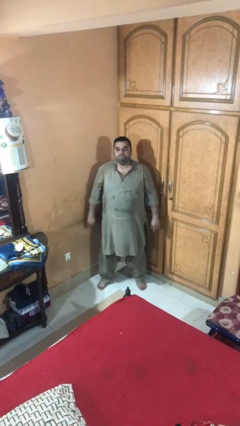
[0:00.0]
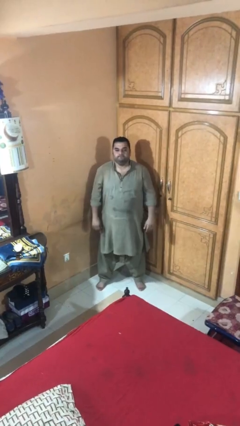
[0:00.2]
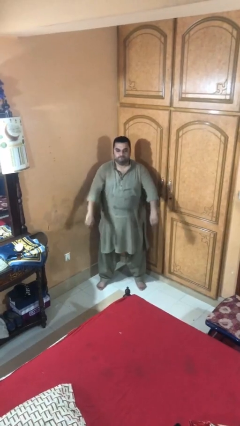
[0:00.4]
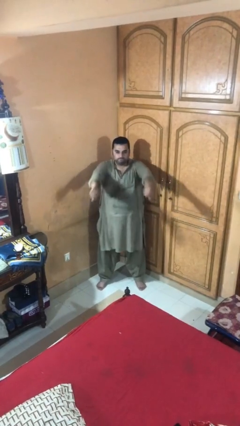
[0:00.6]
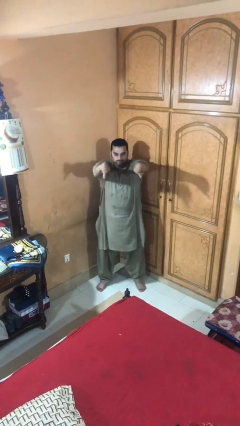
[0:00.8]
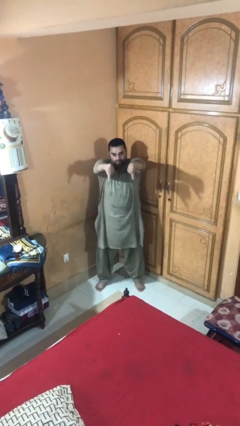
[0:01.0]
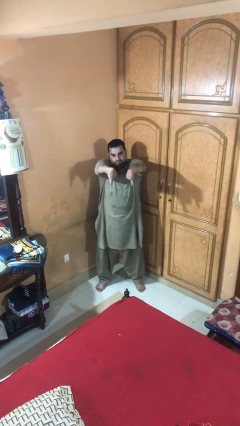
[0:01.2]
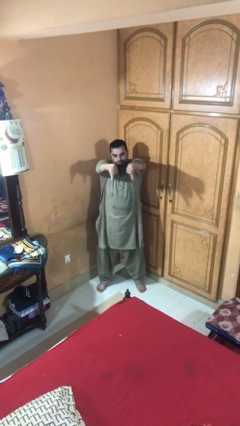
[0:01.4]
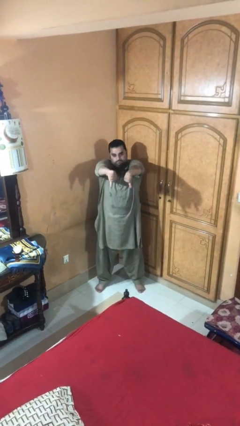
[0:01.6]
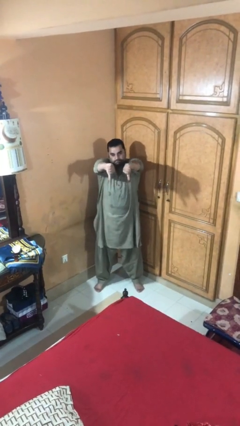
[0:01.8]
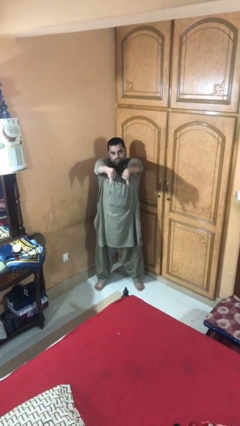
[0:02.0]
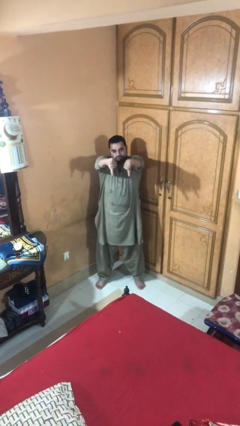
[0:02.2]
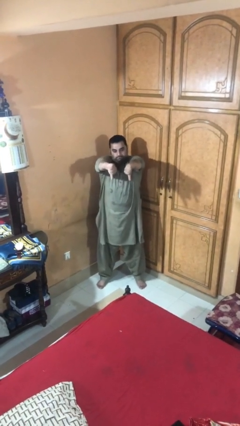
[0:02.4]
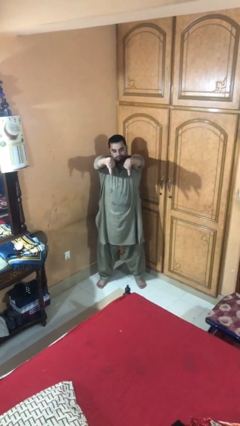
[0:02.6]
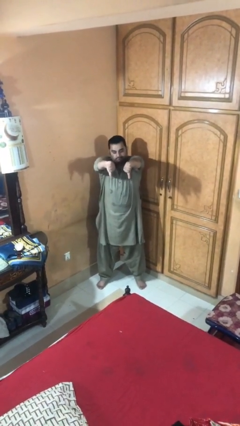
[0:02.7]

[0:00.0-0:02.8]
person gestures thumbs down

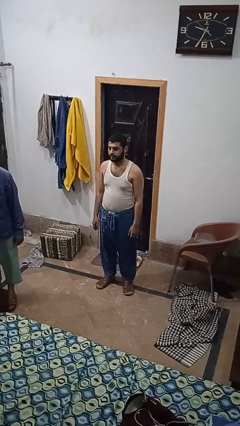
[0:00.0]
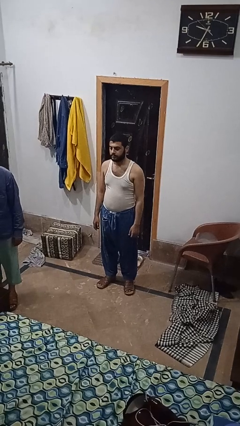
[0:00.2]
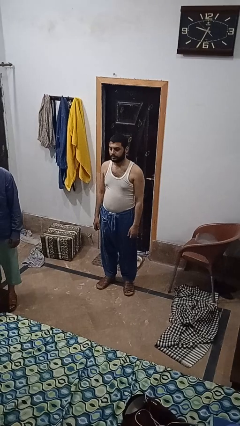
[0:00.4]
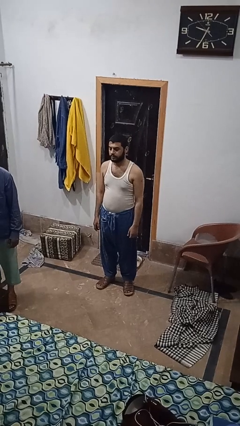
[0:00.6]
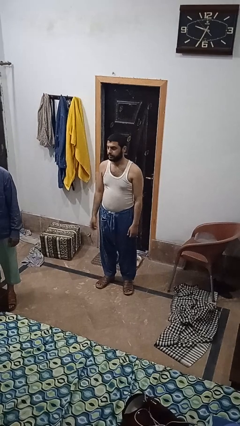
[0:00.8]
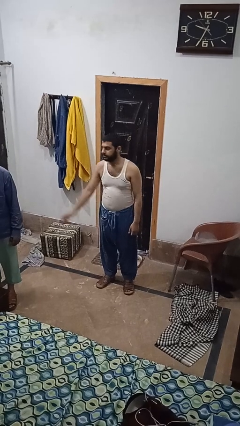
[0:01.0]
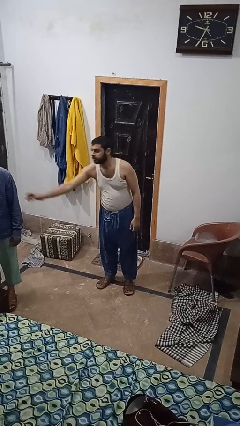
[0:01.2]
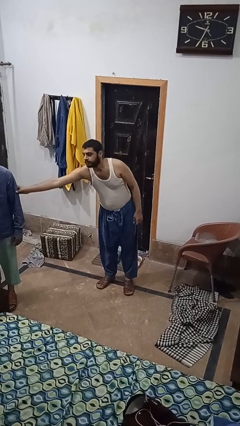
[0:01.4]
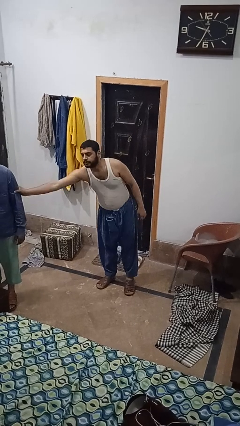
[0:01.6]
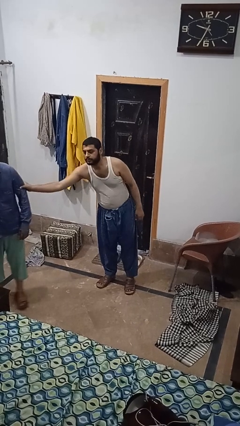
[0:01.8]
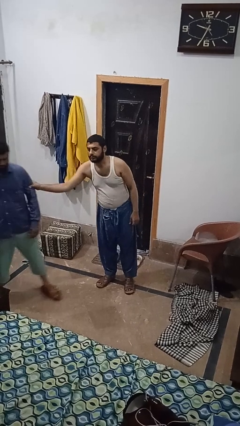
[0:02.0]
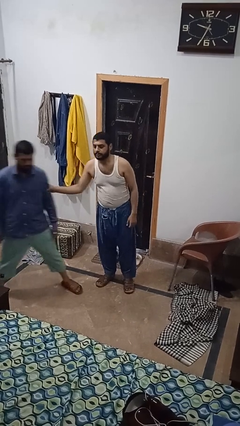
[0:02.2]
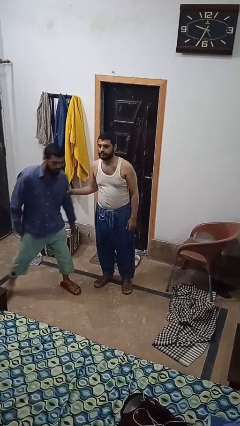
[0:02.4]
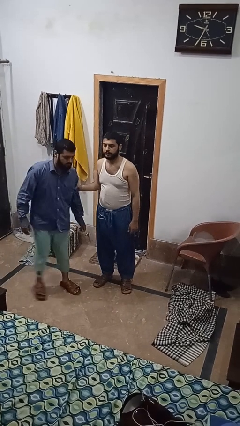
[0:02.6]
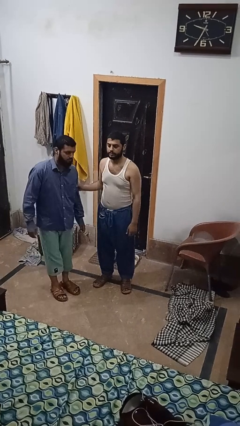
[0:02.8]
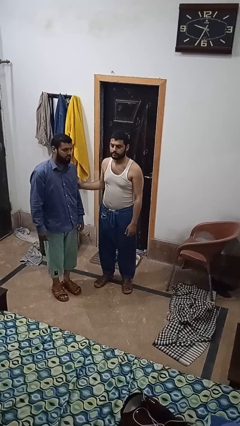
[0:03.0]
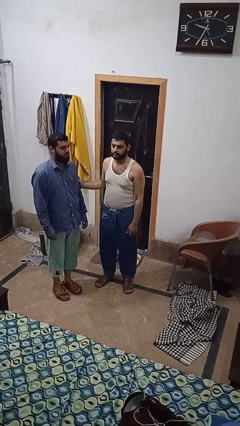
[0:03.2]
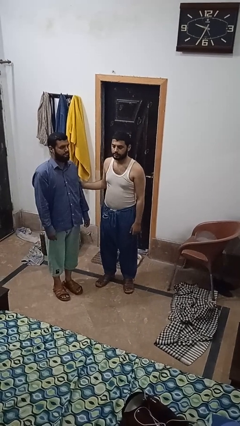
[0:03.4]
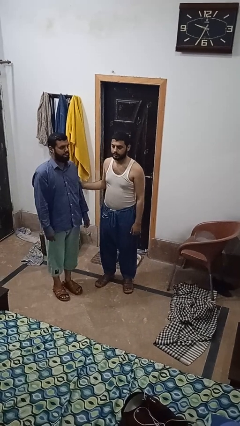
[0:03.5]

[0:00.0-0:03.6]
person grabs person by bicep

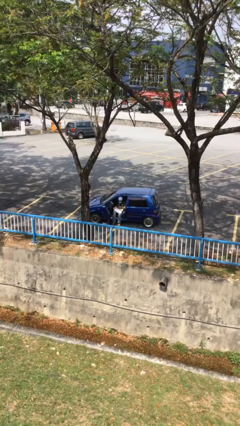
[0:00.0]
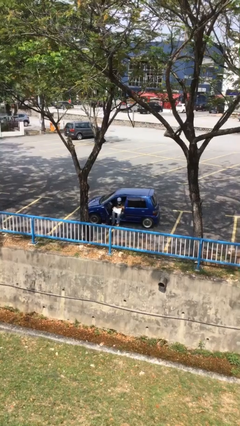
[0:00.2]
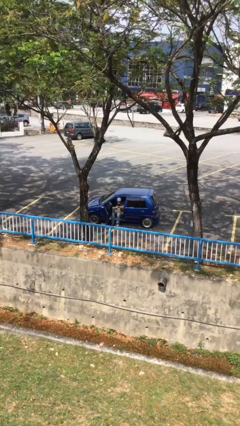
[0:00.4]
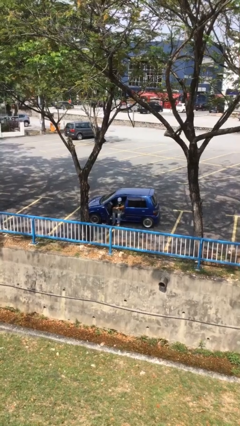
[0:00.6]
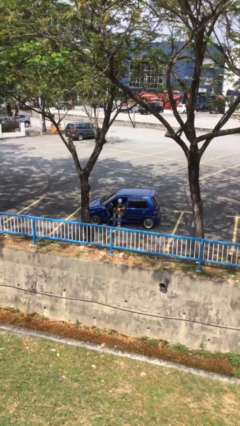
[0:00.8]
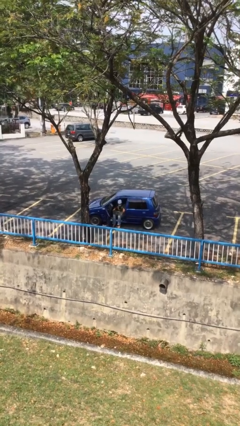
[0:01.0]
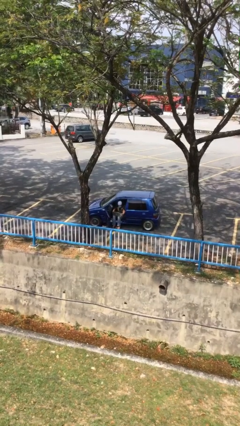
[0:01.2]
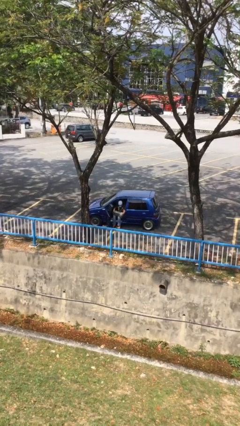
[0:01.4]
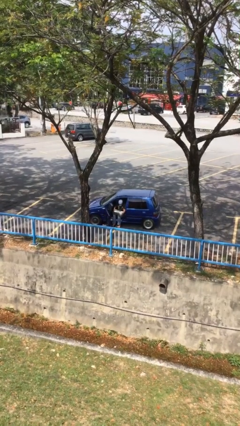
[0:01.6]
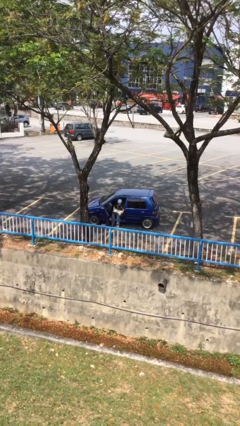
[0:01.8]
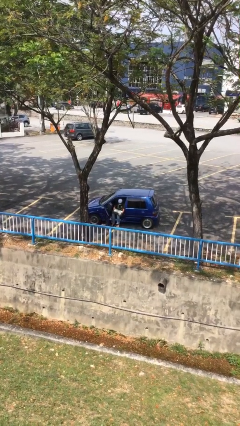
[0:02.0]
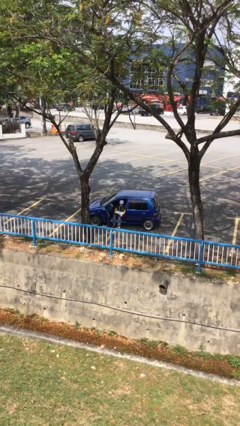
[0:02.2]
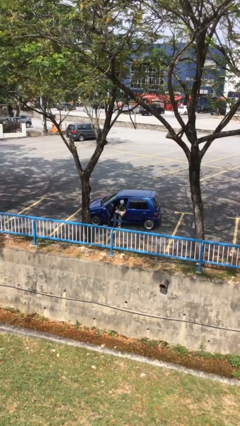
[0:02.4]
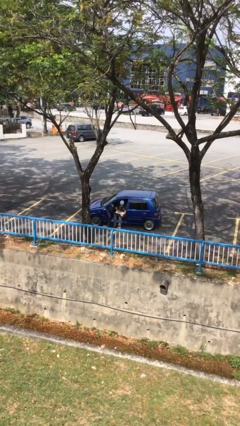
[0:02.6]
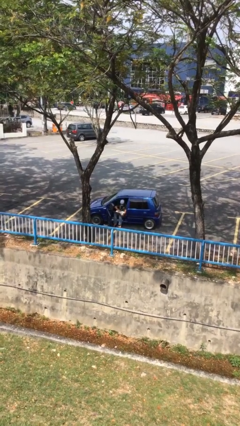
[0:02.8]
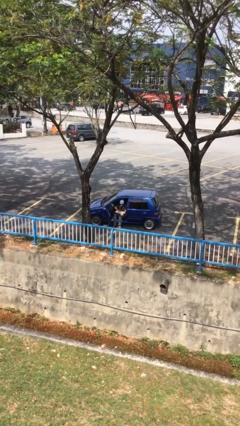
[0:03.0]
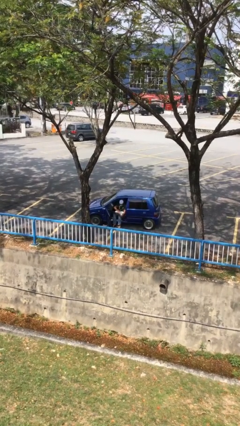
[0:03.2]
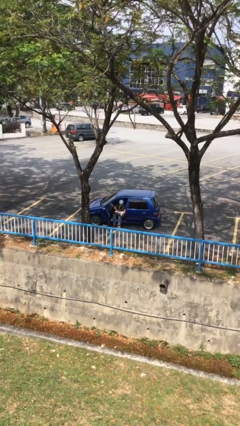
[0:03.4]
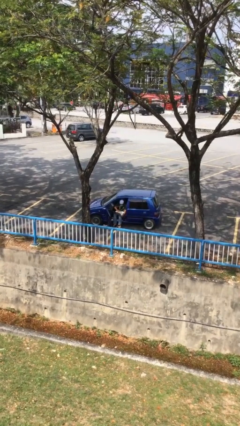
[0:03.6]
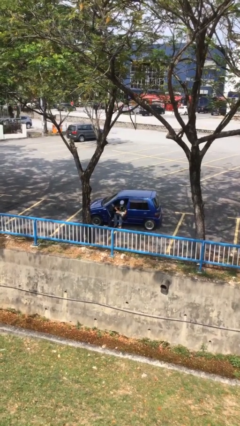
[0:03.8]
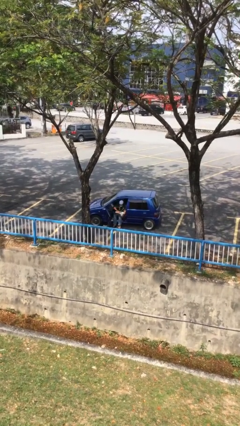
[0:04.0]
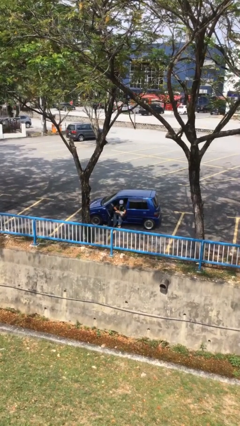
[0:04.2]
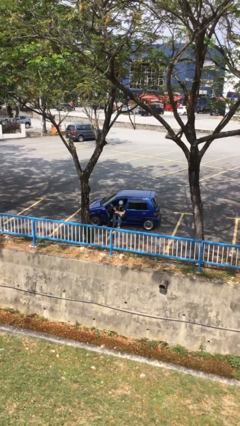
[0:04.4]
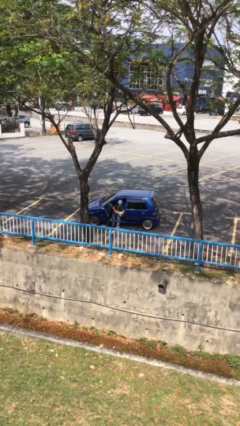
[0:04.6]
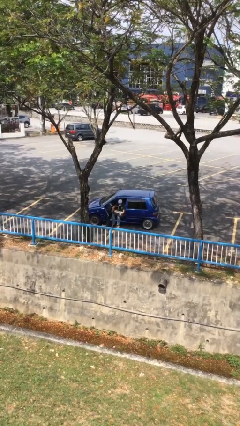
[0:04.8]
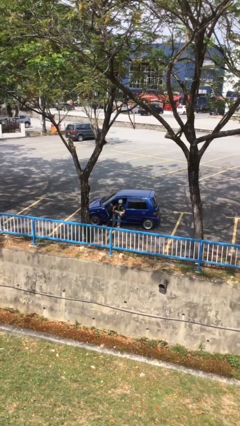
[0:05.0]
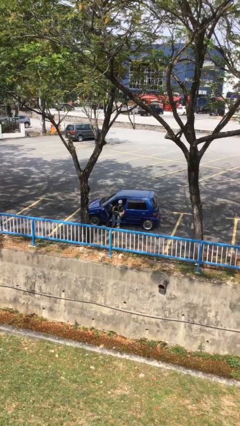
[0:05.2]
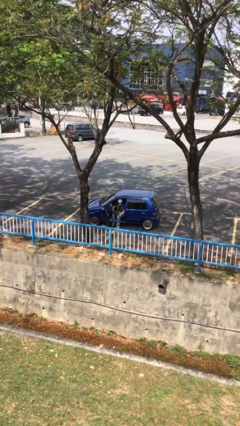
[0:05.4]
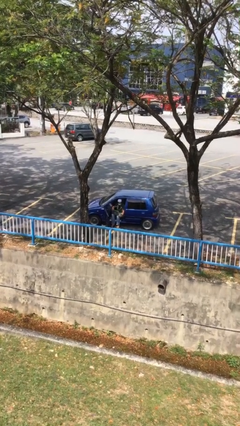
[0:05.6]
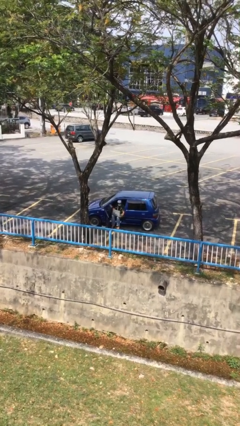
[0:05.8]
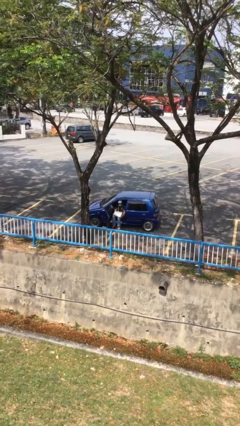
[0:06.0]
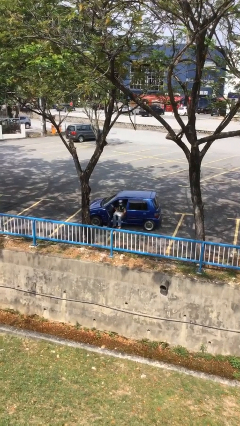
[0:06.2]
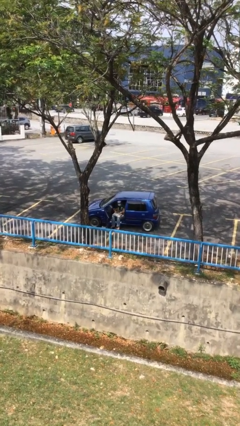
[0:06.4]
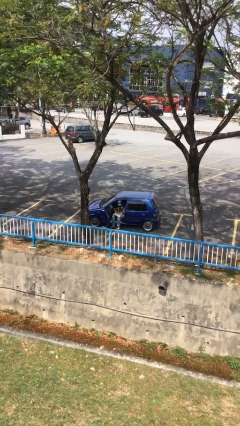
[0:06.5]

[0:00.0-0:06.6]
person interacts with laptop

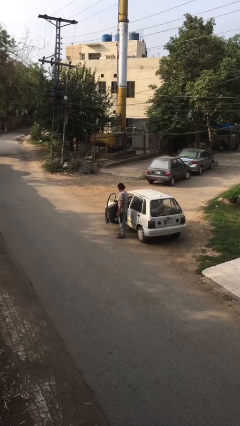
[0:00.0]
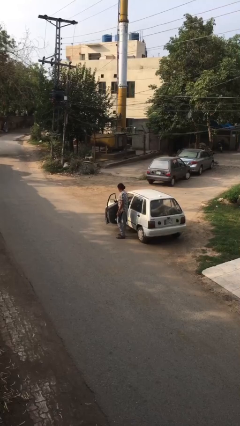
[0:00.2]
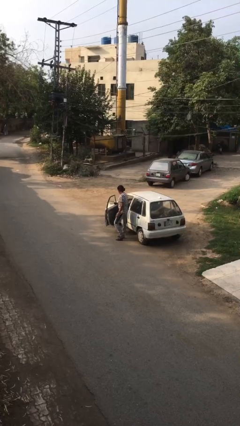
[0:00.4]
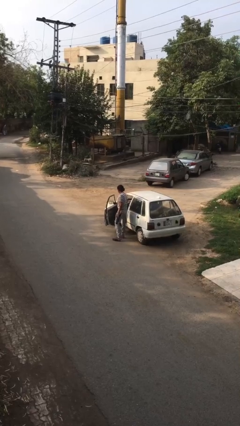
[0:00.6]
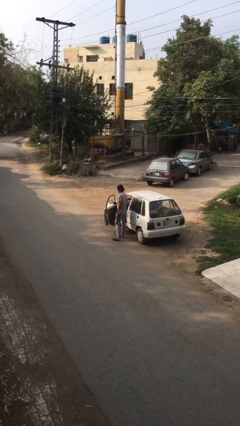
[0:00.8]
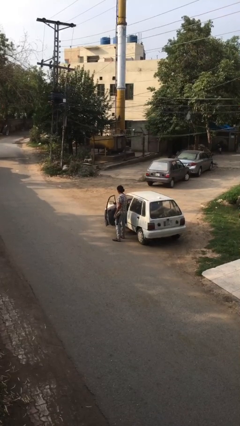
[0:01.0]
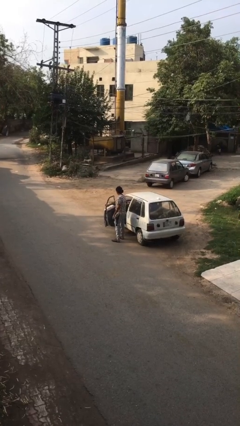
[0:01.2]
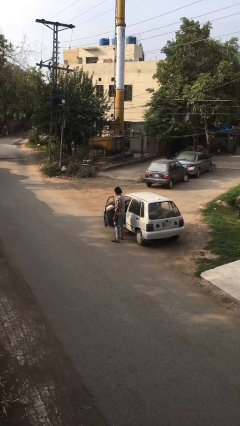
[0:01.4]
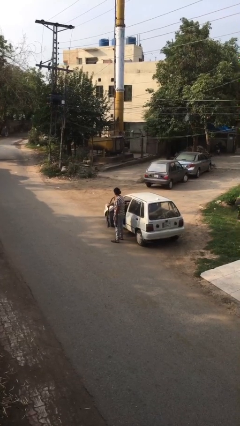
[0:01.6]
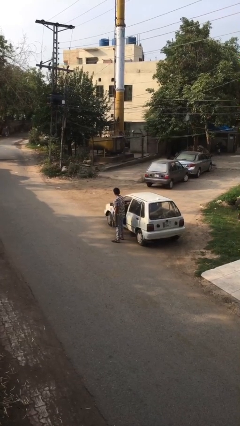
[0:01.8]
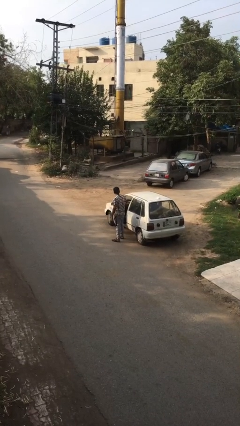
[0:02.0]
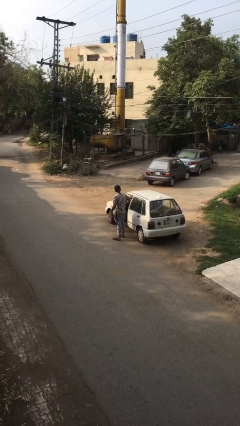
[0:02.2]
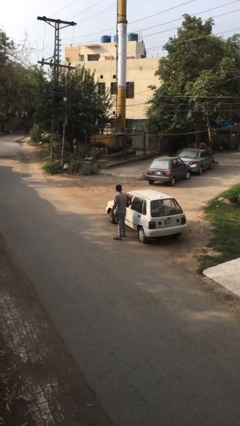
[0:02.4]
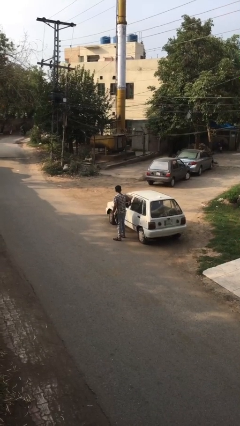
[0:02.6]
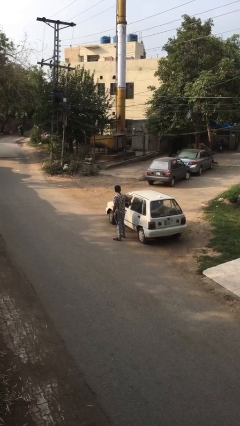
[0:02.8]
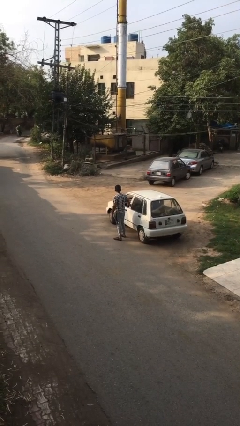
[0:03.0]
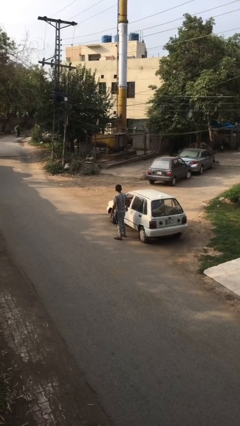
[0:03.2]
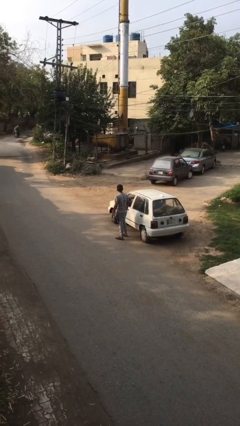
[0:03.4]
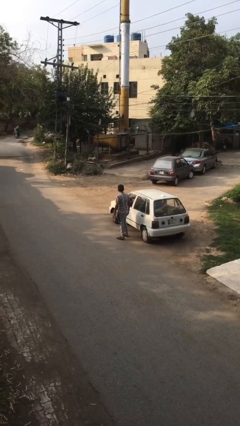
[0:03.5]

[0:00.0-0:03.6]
person closes car door

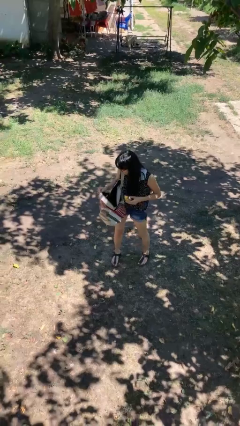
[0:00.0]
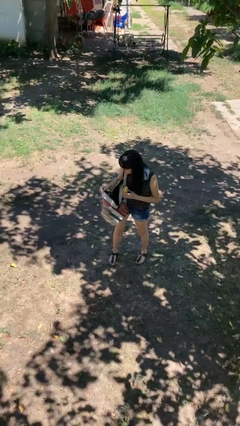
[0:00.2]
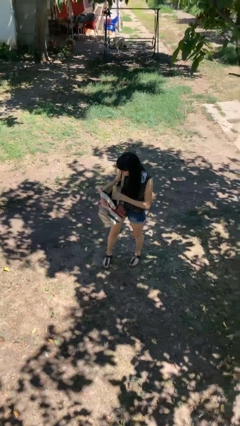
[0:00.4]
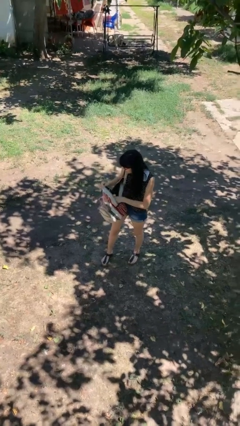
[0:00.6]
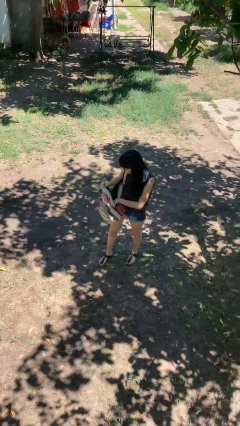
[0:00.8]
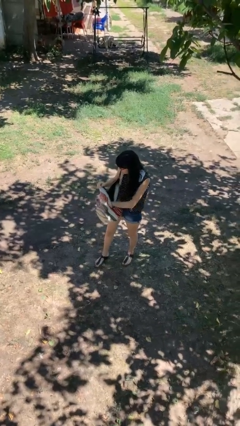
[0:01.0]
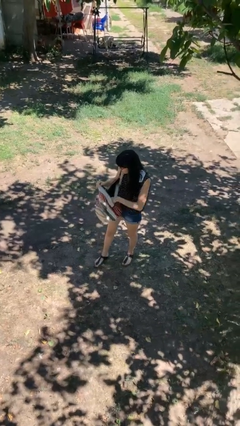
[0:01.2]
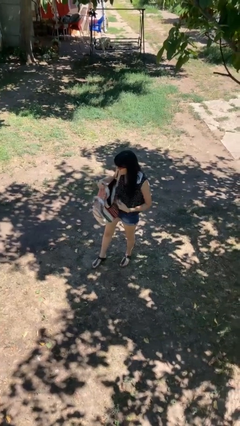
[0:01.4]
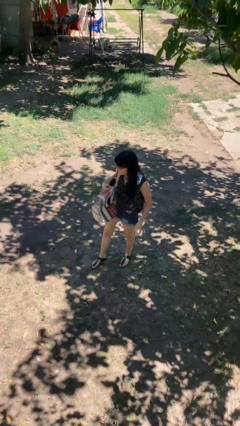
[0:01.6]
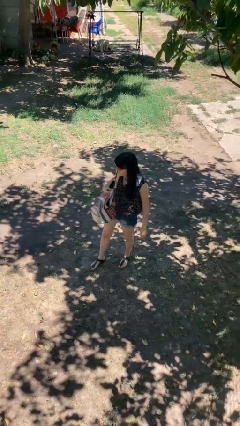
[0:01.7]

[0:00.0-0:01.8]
person puts object into backpack
